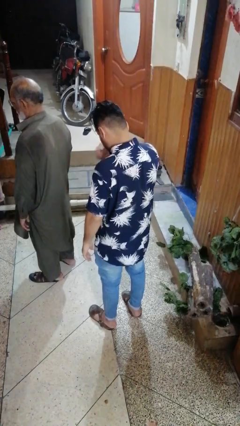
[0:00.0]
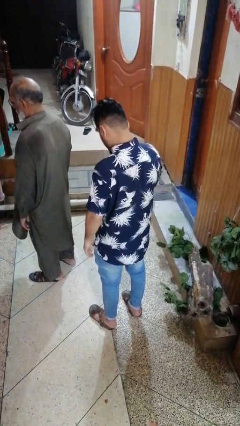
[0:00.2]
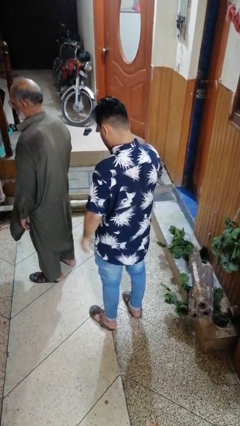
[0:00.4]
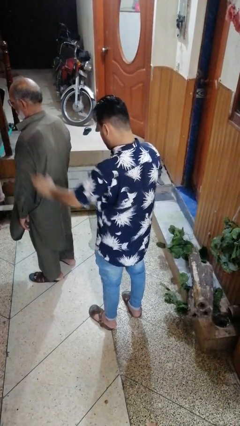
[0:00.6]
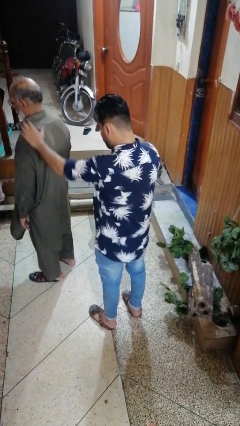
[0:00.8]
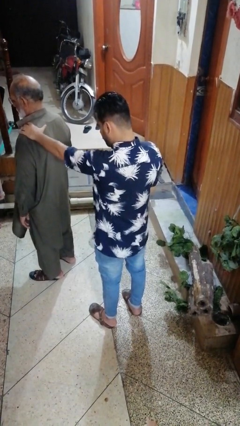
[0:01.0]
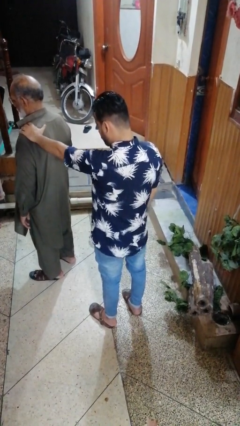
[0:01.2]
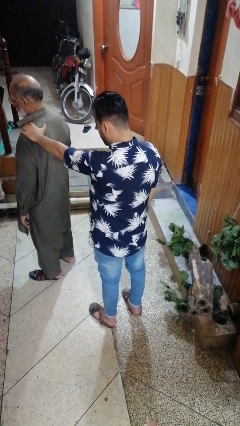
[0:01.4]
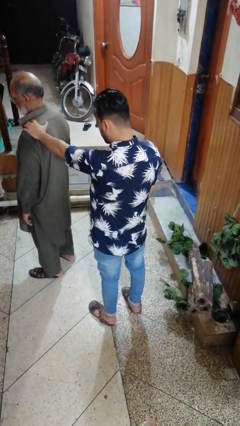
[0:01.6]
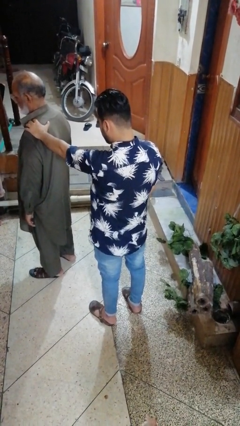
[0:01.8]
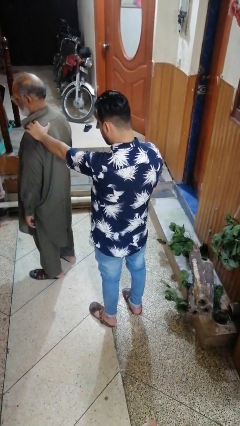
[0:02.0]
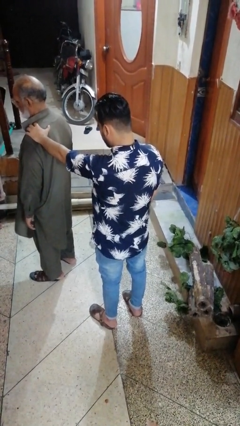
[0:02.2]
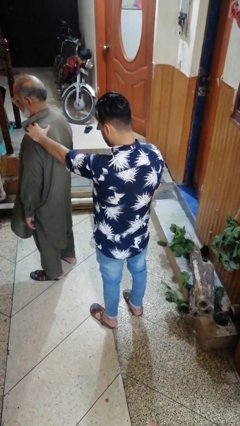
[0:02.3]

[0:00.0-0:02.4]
person grabs person by shoulder

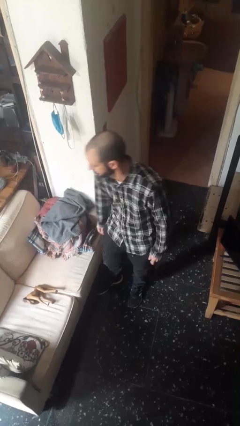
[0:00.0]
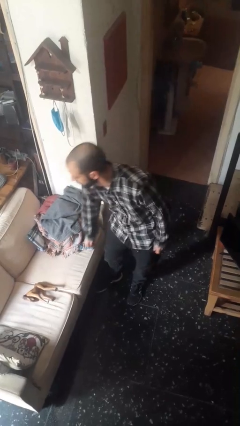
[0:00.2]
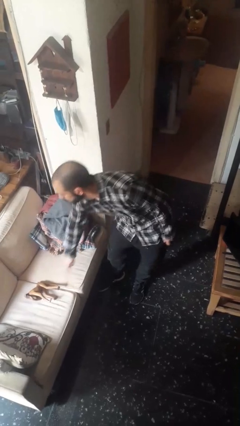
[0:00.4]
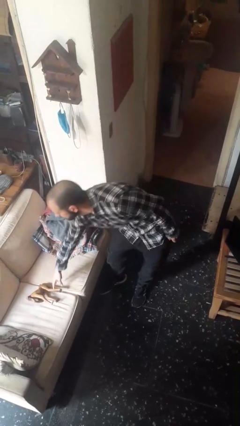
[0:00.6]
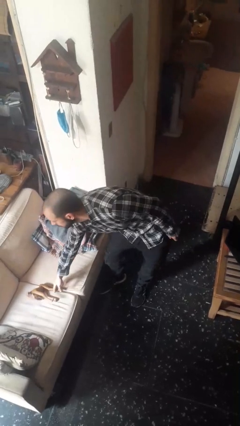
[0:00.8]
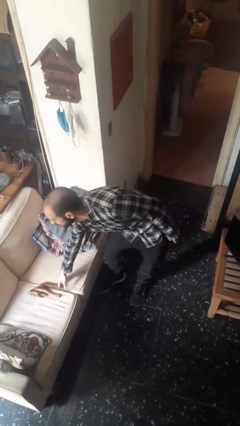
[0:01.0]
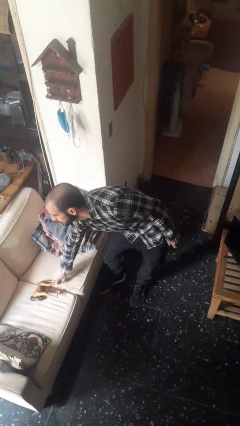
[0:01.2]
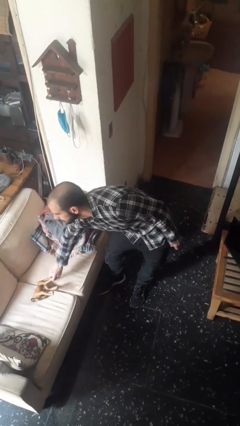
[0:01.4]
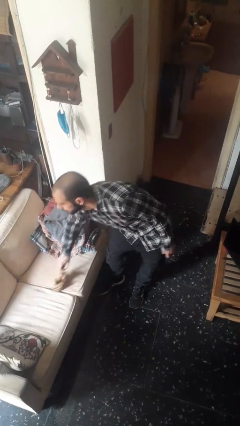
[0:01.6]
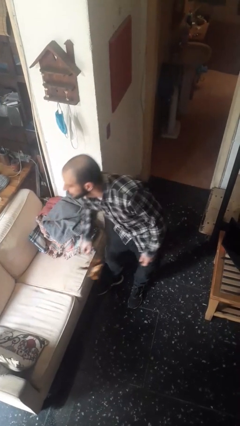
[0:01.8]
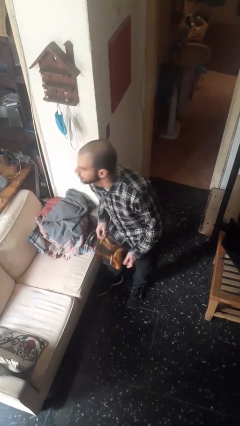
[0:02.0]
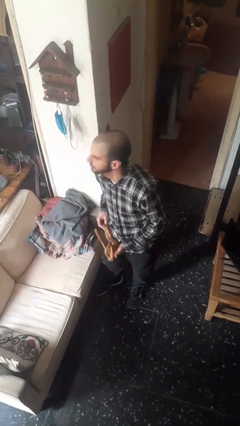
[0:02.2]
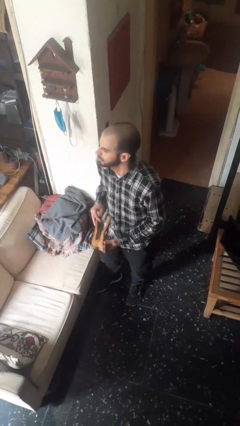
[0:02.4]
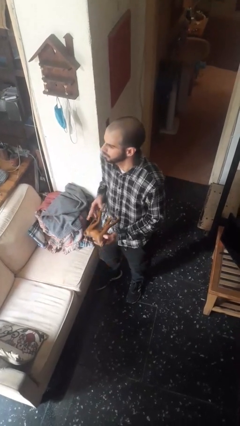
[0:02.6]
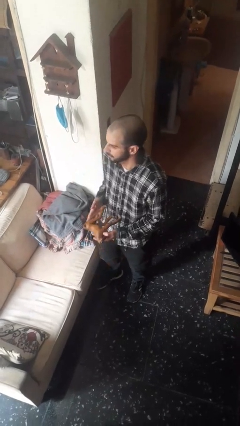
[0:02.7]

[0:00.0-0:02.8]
person picks up object from couch

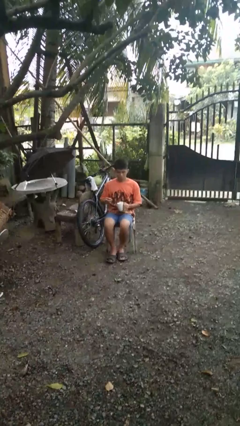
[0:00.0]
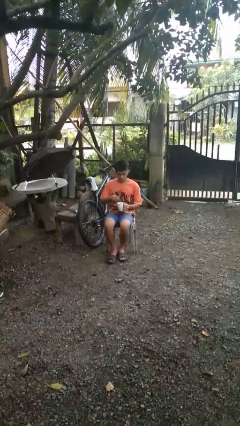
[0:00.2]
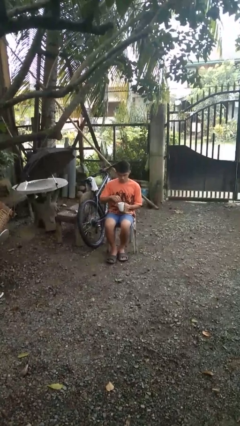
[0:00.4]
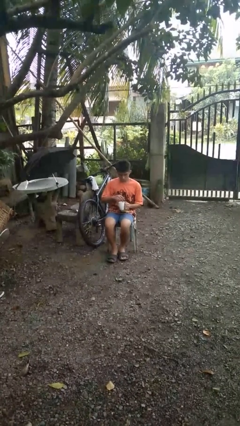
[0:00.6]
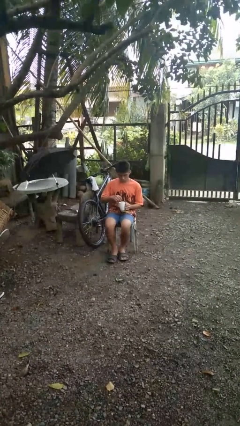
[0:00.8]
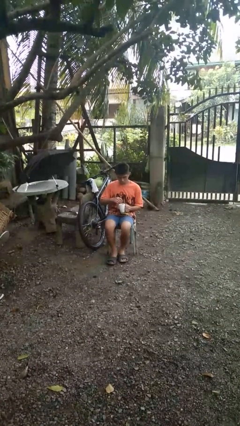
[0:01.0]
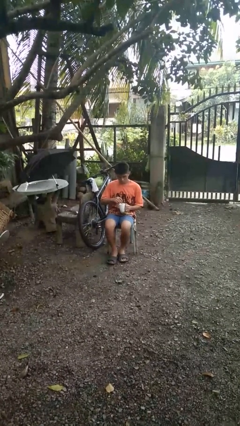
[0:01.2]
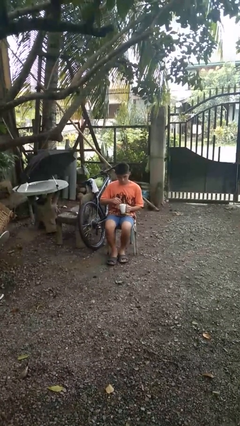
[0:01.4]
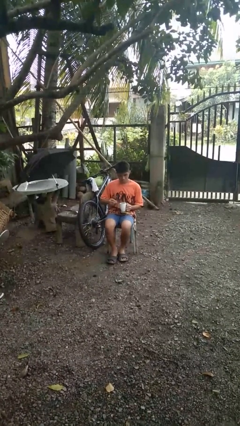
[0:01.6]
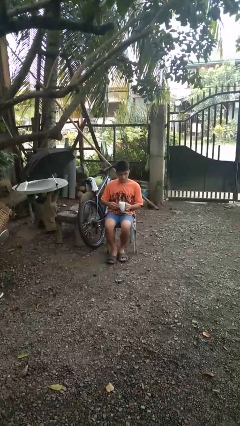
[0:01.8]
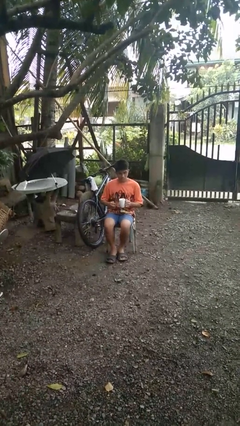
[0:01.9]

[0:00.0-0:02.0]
person stirs mug

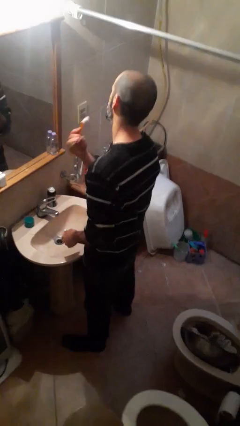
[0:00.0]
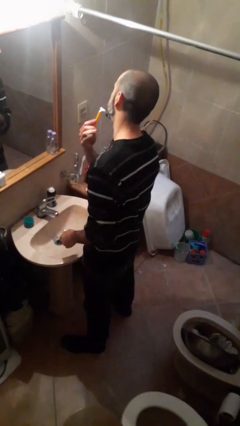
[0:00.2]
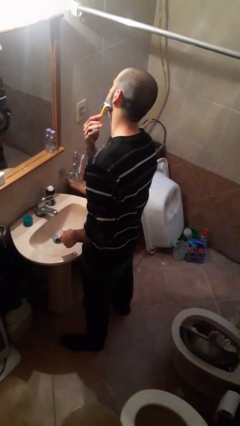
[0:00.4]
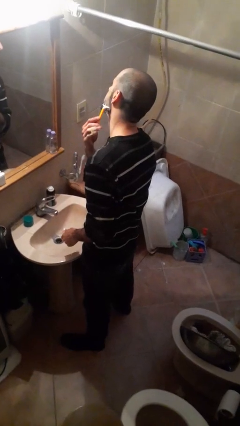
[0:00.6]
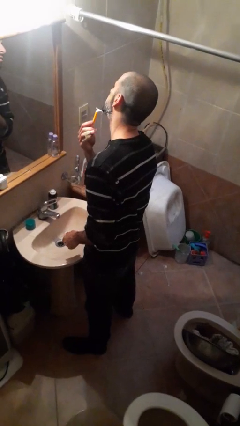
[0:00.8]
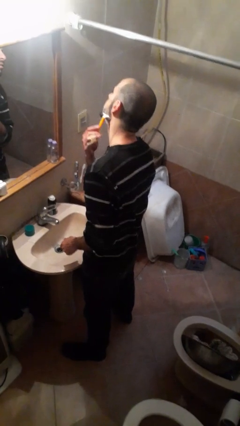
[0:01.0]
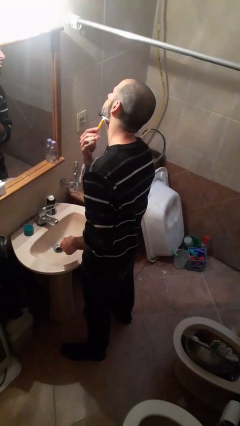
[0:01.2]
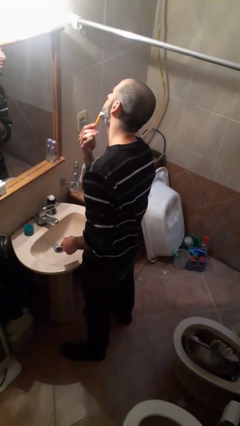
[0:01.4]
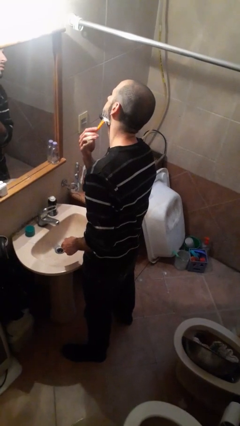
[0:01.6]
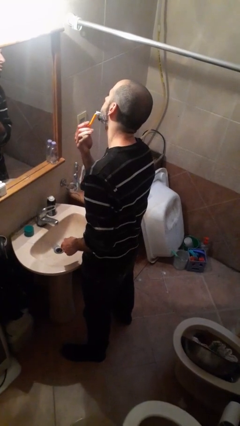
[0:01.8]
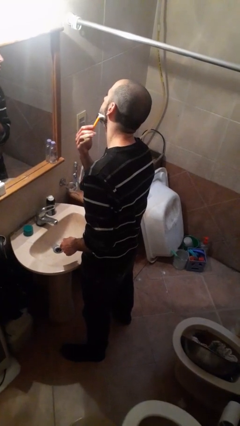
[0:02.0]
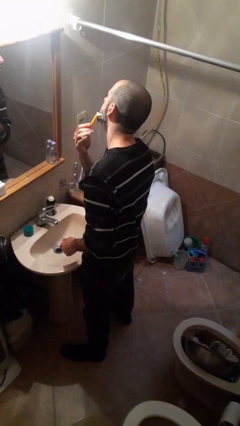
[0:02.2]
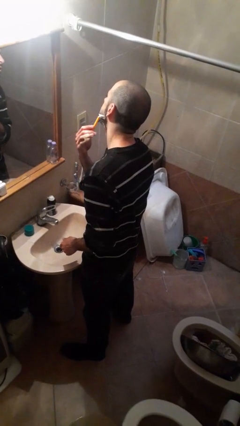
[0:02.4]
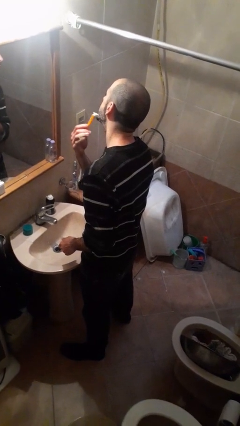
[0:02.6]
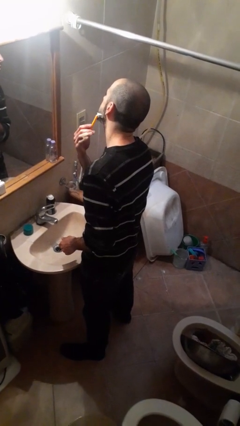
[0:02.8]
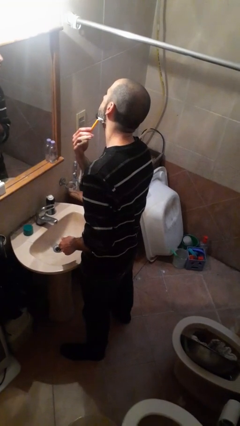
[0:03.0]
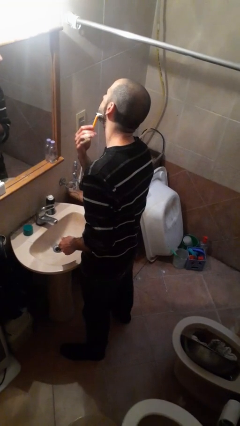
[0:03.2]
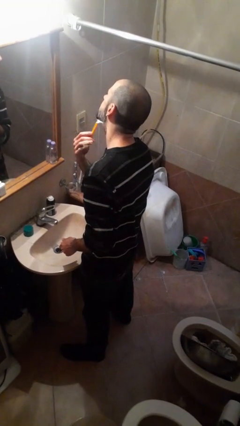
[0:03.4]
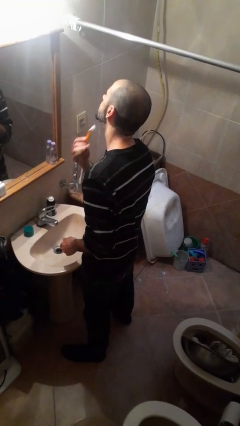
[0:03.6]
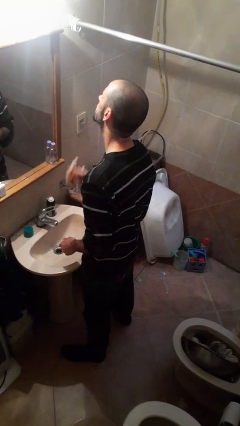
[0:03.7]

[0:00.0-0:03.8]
person shaves face

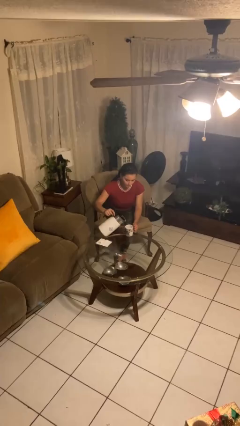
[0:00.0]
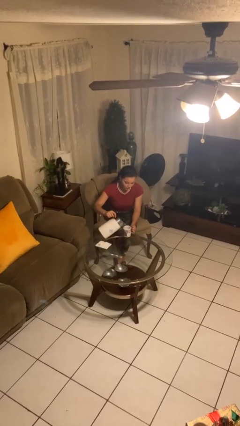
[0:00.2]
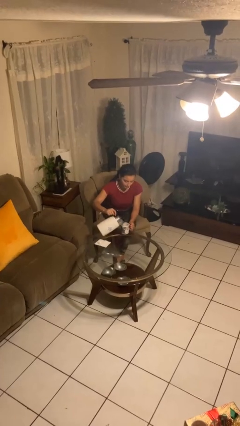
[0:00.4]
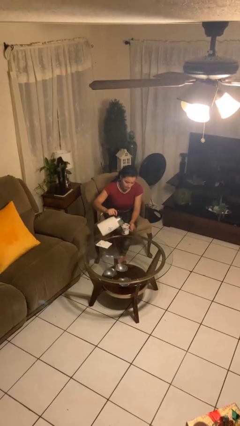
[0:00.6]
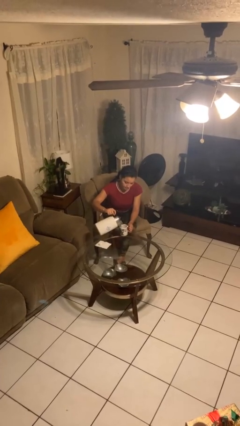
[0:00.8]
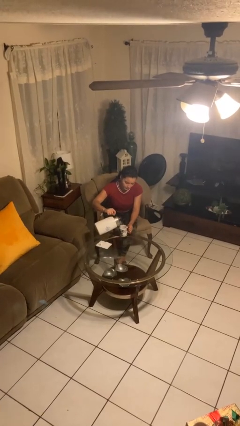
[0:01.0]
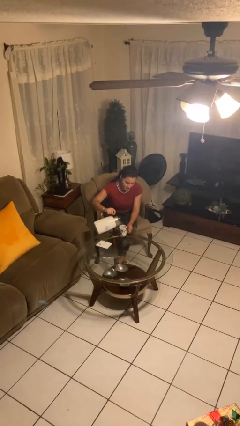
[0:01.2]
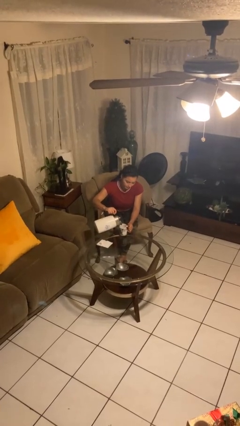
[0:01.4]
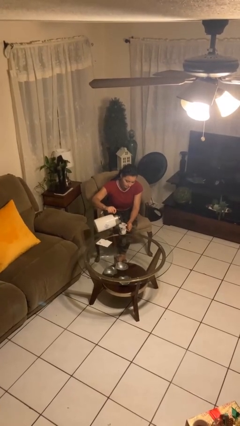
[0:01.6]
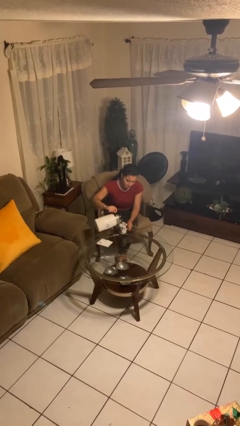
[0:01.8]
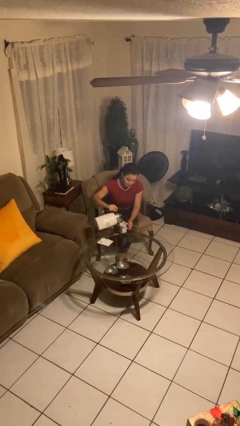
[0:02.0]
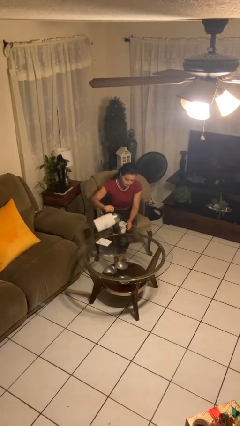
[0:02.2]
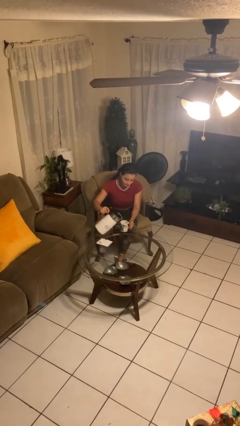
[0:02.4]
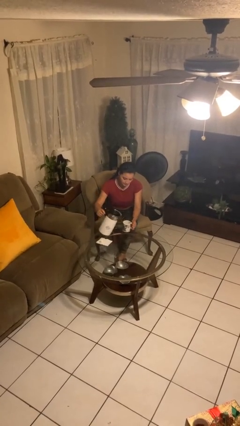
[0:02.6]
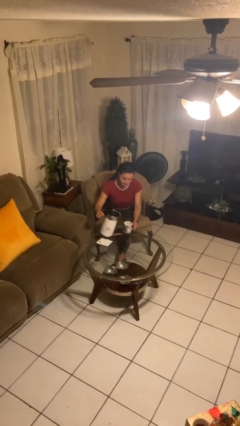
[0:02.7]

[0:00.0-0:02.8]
person pours coffee into mug

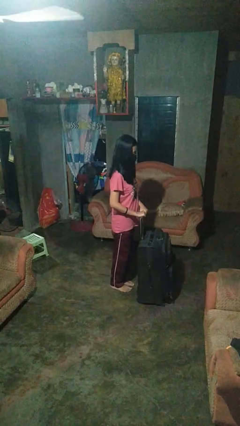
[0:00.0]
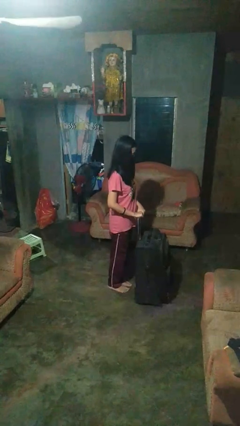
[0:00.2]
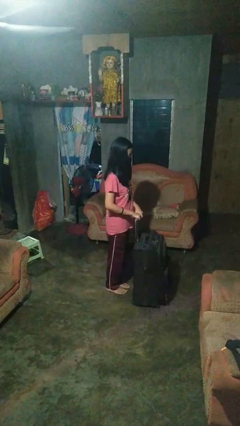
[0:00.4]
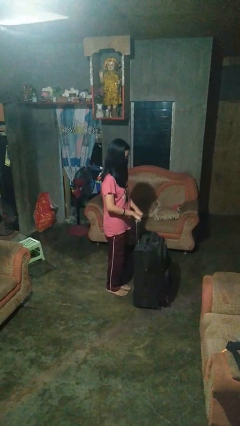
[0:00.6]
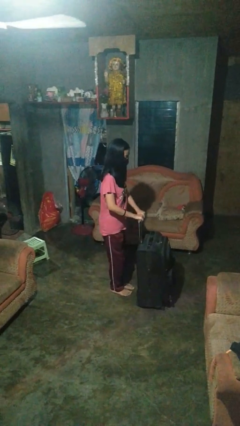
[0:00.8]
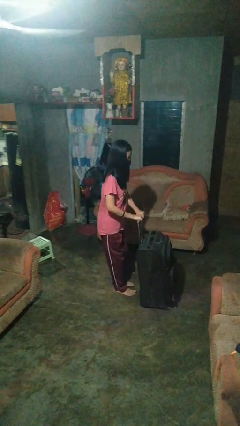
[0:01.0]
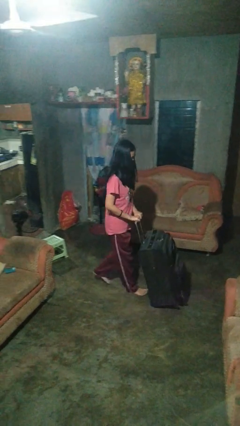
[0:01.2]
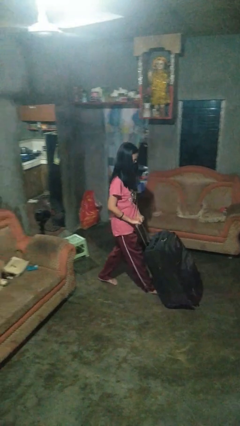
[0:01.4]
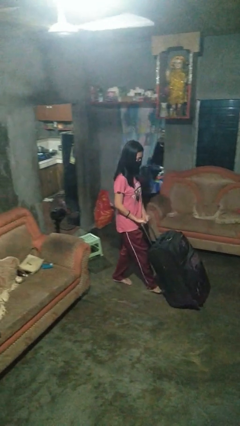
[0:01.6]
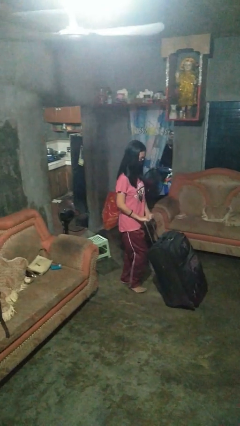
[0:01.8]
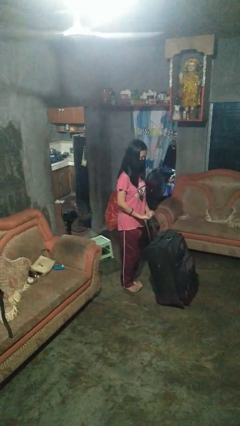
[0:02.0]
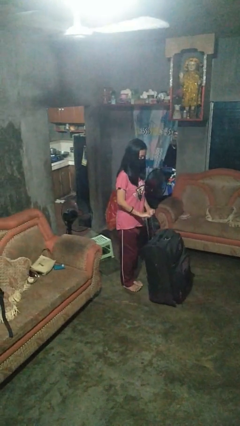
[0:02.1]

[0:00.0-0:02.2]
person pulls wheeled cart

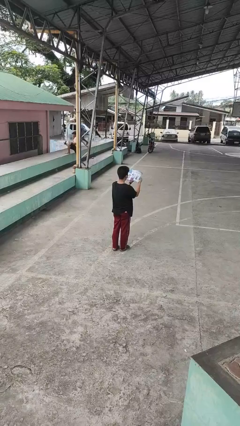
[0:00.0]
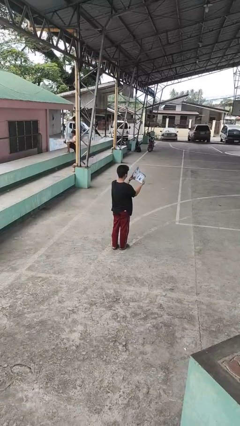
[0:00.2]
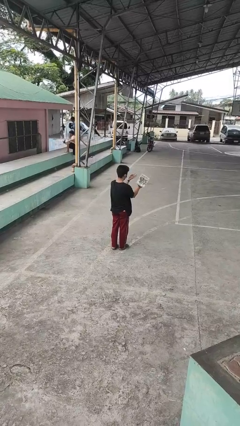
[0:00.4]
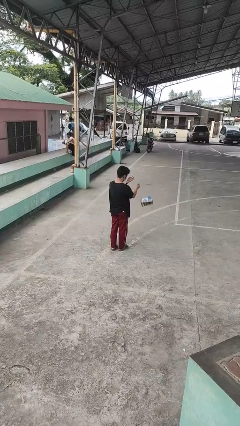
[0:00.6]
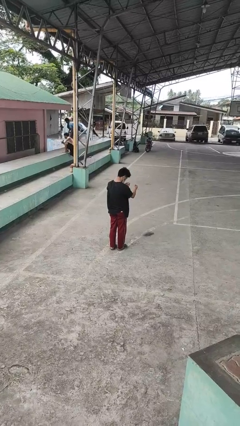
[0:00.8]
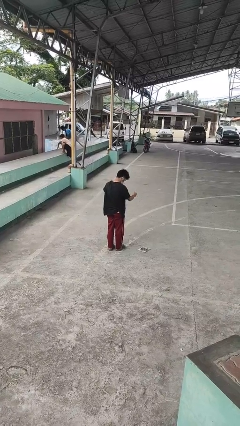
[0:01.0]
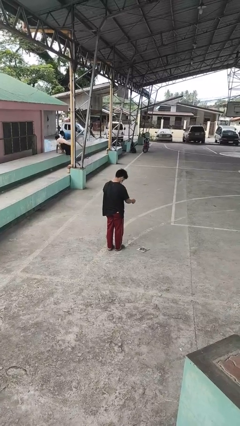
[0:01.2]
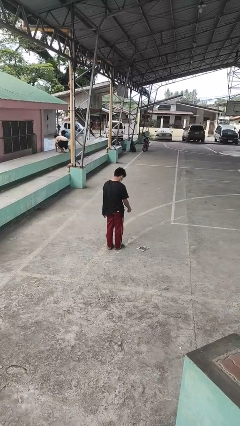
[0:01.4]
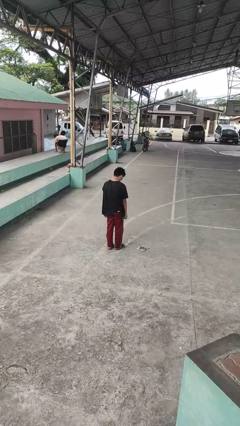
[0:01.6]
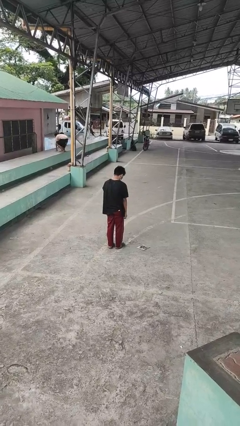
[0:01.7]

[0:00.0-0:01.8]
person drops object
